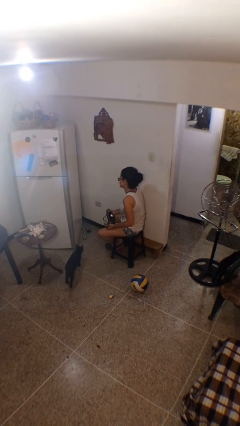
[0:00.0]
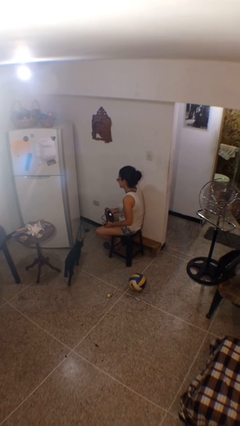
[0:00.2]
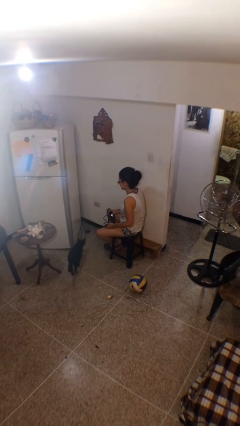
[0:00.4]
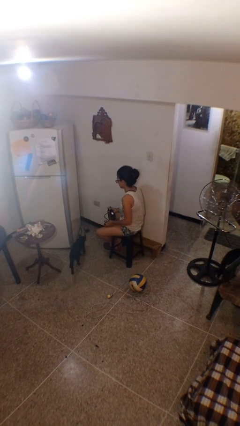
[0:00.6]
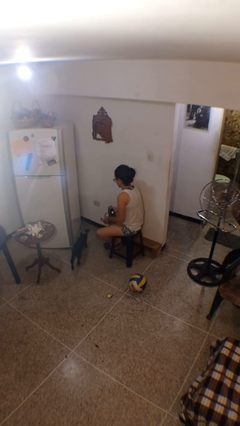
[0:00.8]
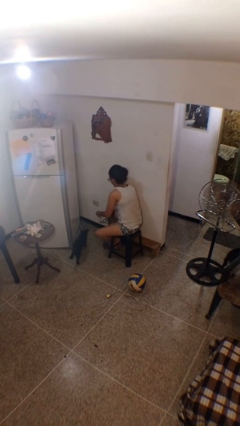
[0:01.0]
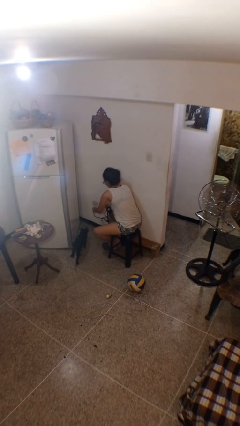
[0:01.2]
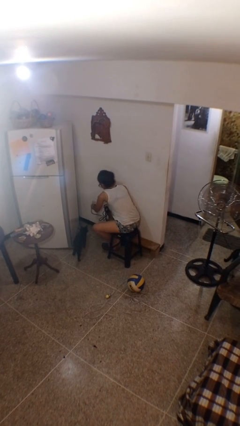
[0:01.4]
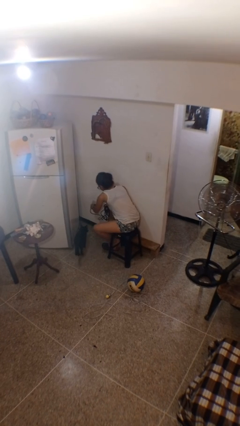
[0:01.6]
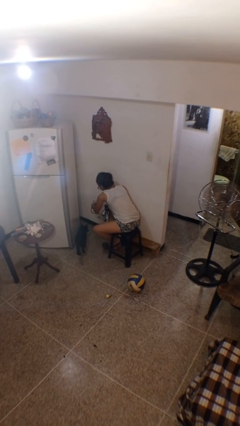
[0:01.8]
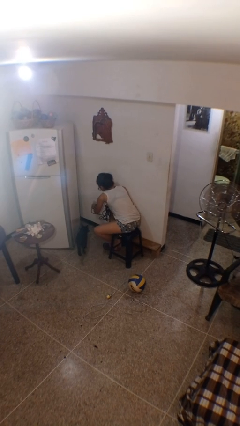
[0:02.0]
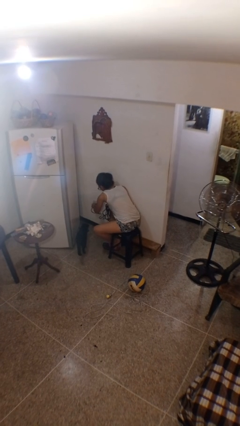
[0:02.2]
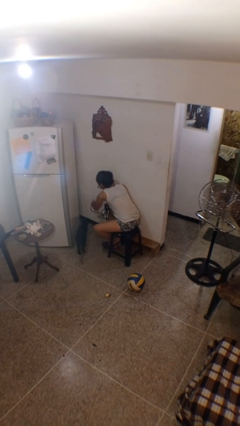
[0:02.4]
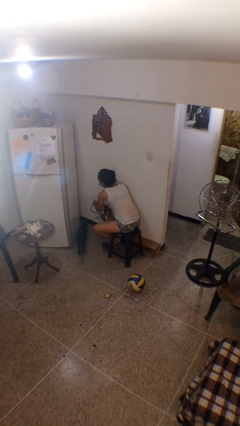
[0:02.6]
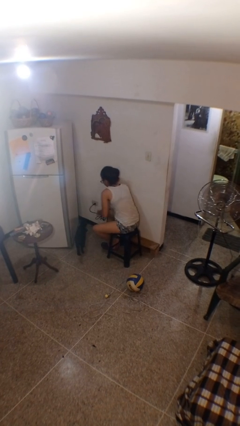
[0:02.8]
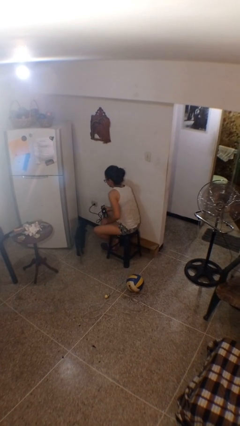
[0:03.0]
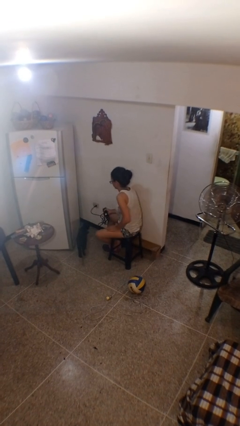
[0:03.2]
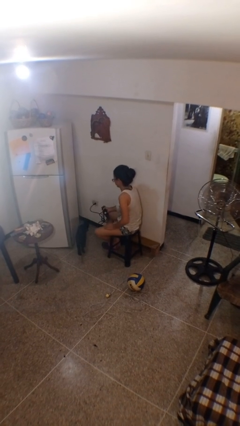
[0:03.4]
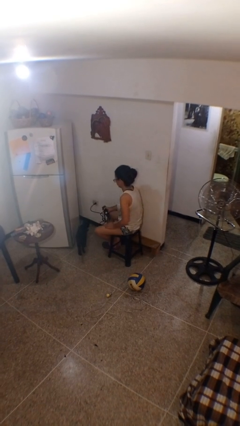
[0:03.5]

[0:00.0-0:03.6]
person plugs into electrical socket

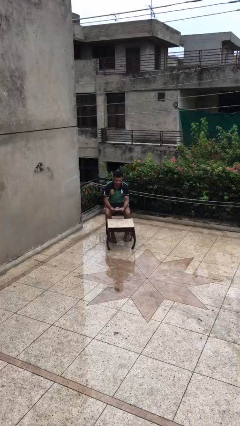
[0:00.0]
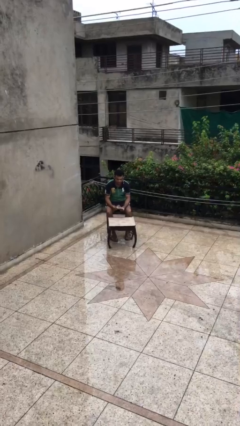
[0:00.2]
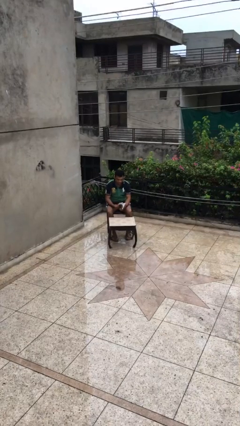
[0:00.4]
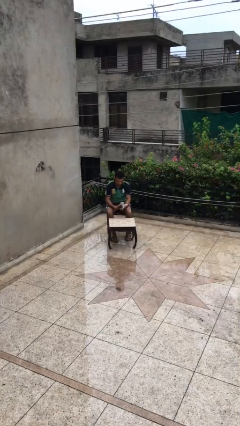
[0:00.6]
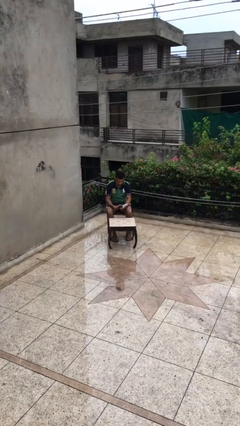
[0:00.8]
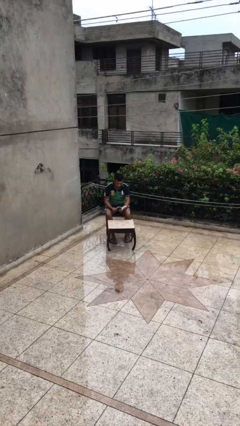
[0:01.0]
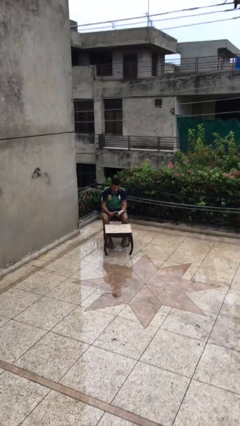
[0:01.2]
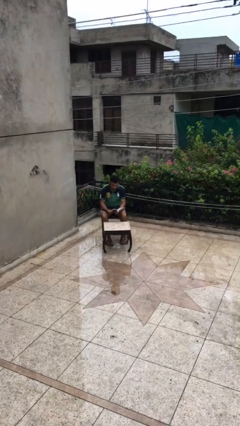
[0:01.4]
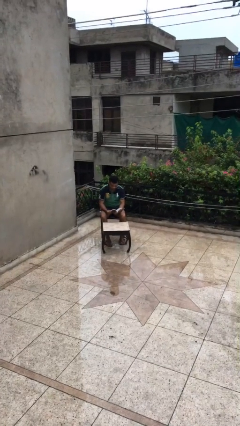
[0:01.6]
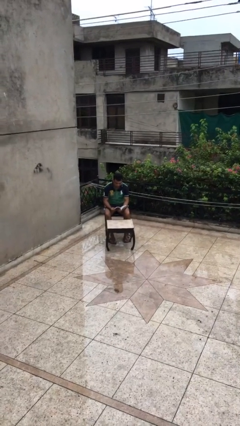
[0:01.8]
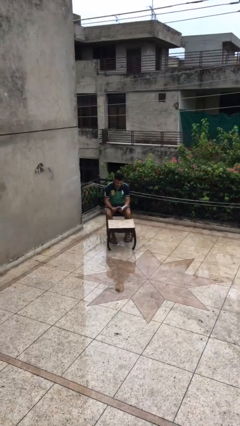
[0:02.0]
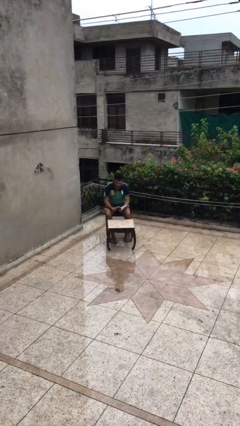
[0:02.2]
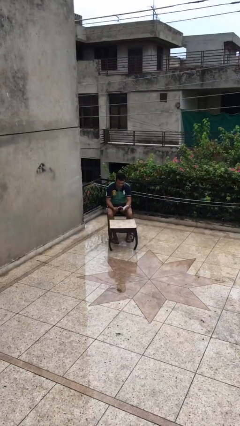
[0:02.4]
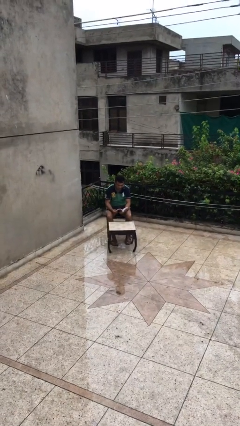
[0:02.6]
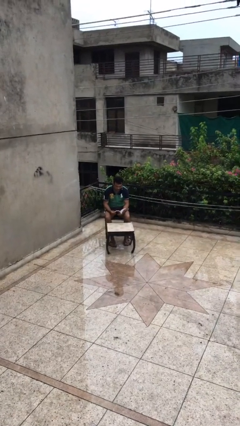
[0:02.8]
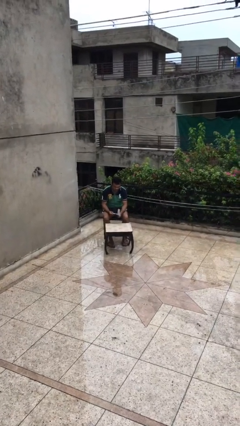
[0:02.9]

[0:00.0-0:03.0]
person reads document

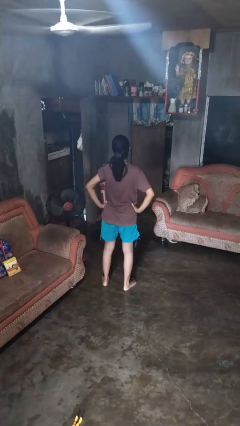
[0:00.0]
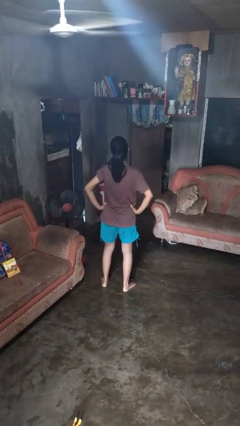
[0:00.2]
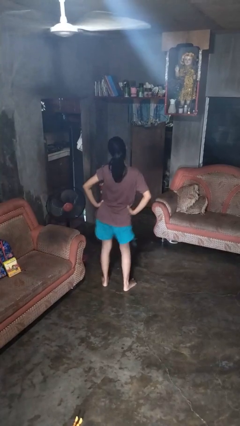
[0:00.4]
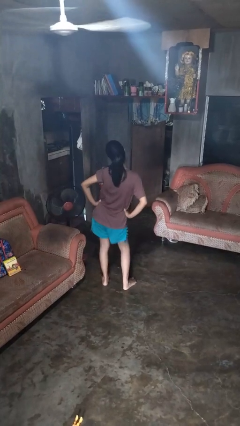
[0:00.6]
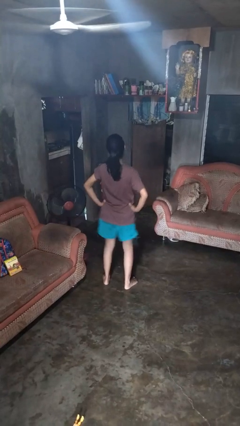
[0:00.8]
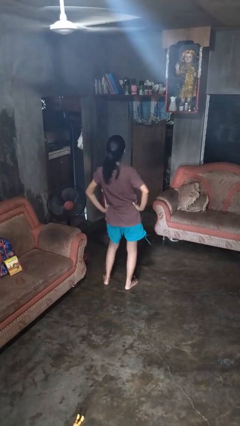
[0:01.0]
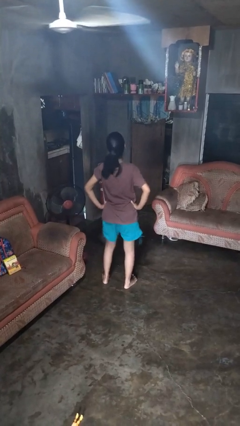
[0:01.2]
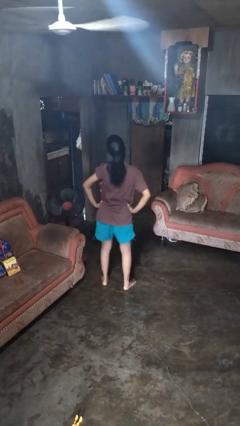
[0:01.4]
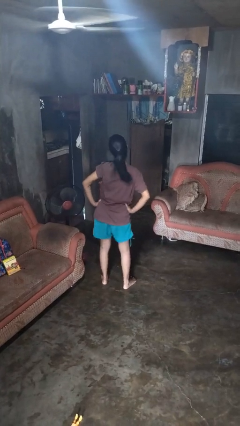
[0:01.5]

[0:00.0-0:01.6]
person dances in place

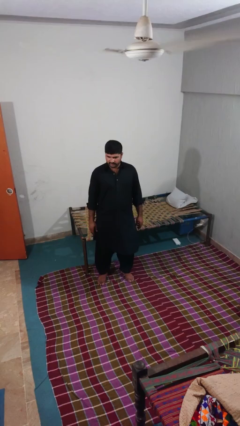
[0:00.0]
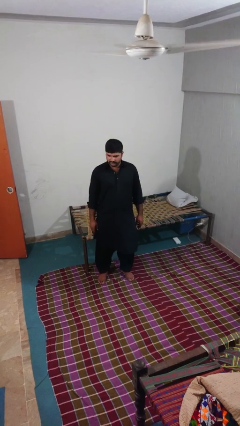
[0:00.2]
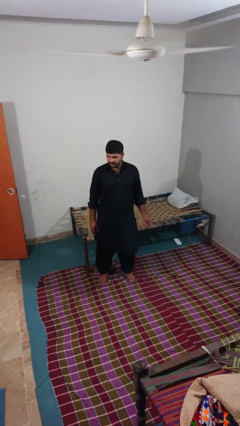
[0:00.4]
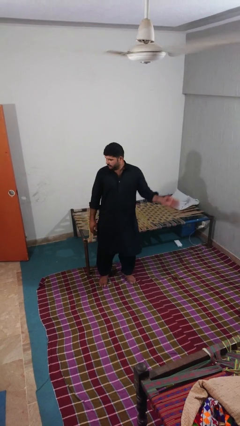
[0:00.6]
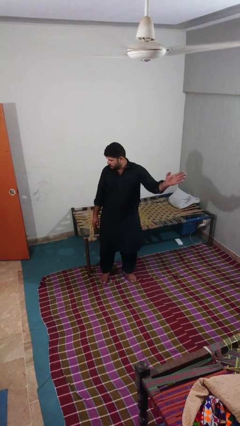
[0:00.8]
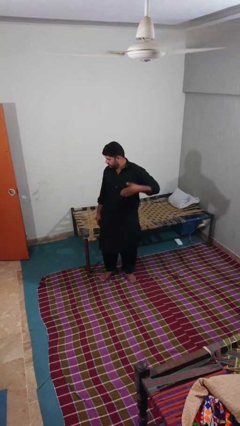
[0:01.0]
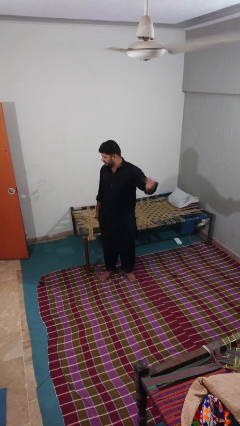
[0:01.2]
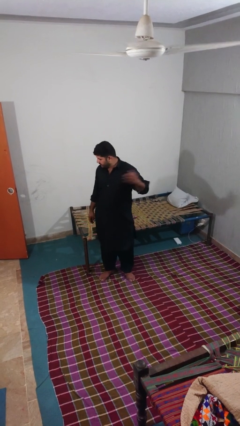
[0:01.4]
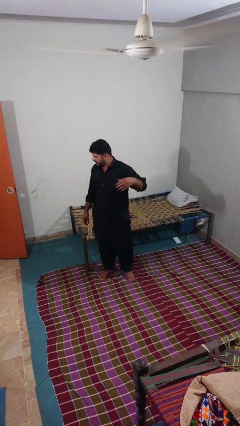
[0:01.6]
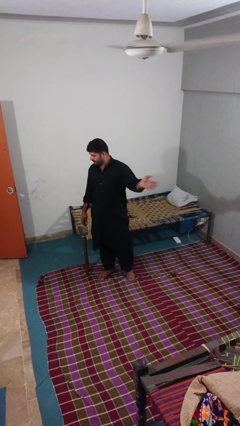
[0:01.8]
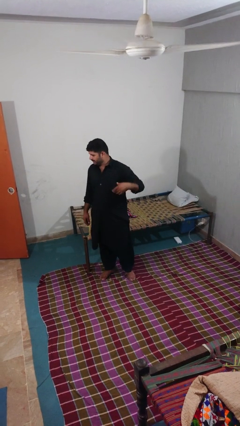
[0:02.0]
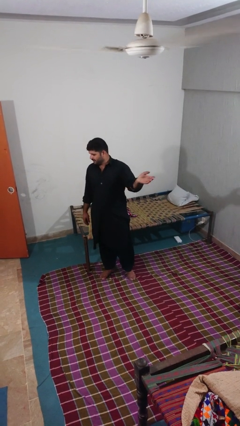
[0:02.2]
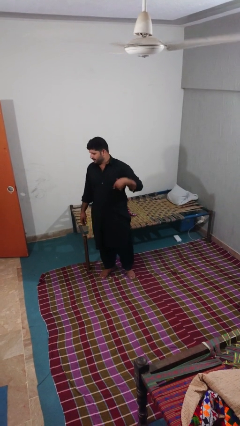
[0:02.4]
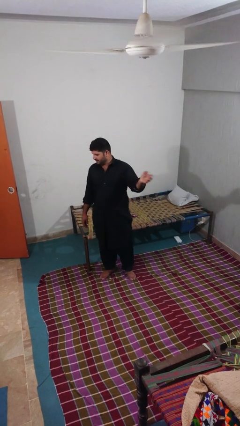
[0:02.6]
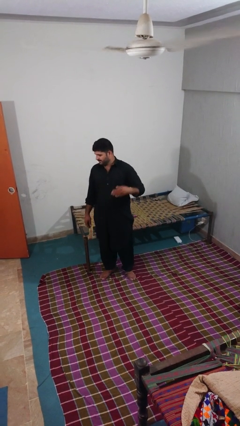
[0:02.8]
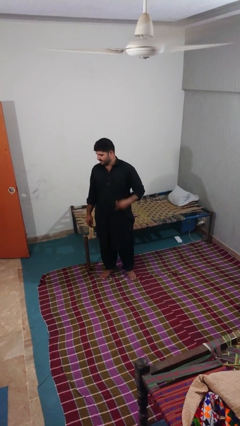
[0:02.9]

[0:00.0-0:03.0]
person gestures come here

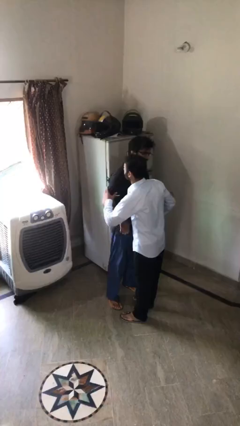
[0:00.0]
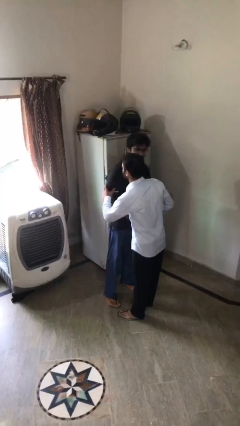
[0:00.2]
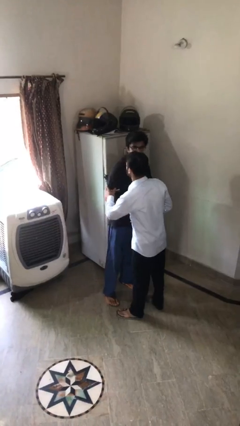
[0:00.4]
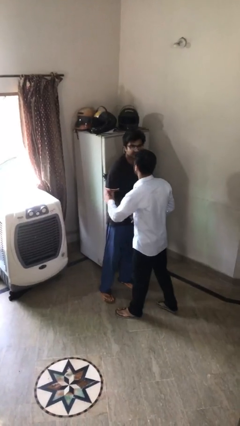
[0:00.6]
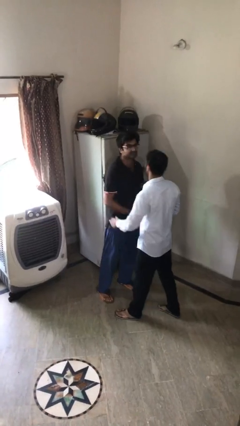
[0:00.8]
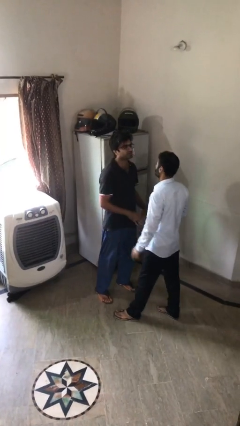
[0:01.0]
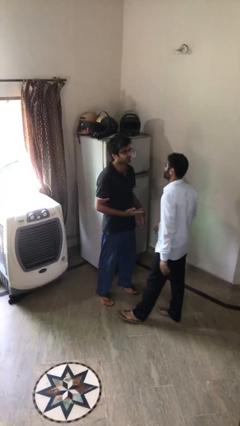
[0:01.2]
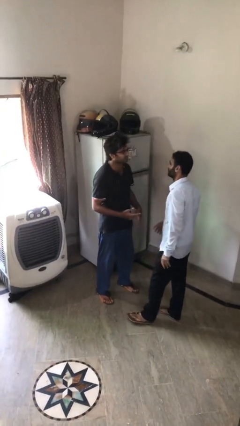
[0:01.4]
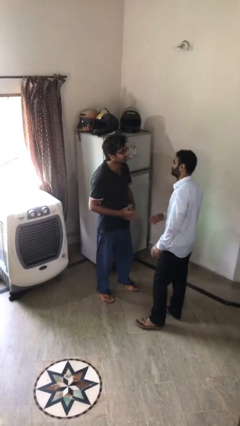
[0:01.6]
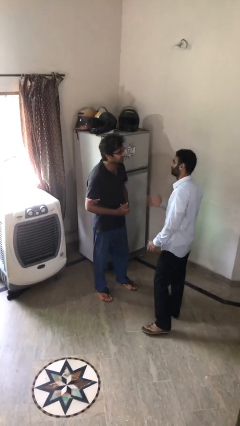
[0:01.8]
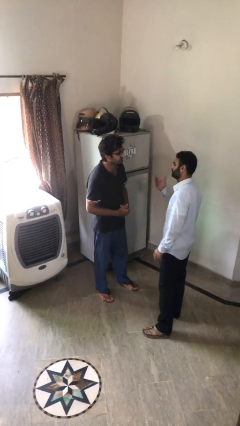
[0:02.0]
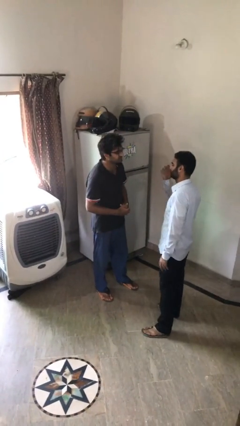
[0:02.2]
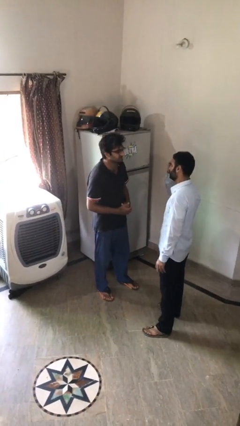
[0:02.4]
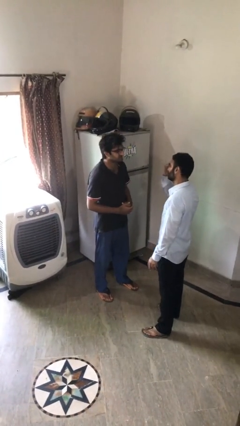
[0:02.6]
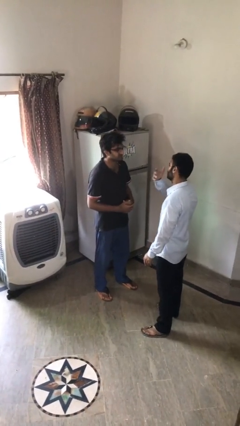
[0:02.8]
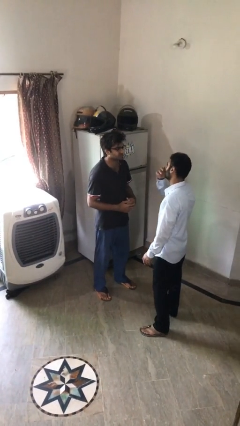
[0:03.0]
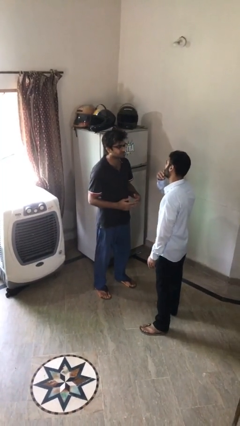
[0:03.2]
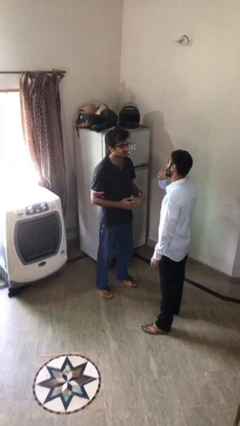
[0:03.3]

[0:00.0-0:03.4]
person talks to person

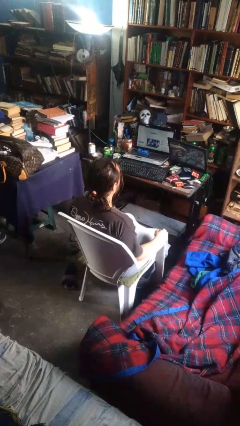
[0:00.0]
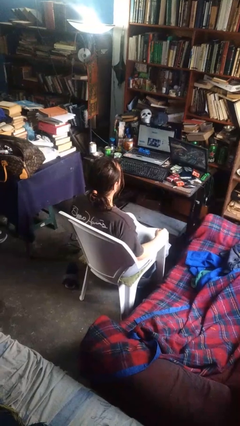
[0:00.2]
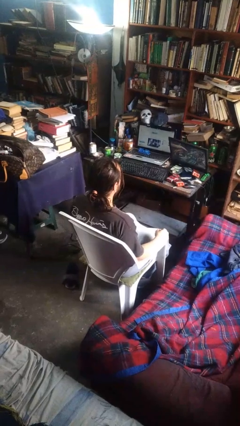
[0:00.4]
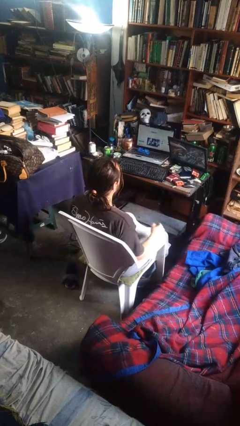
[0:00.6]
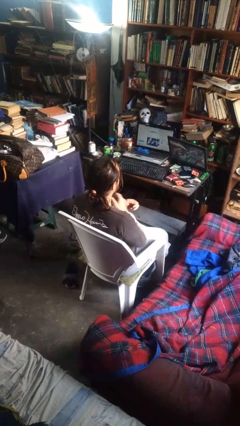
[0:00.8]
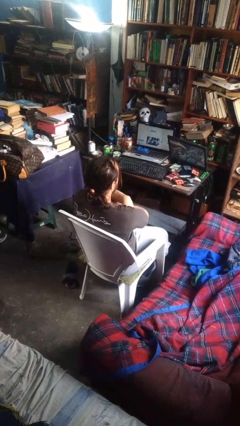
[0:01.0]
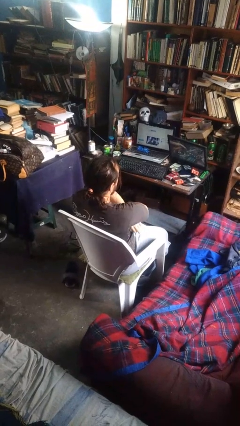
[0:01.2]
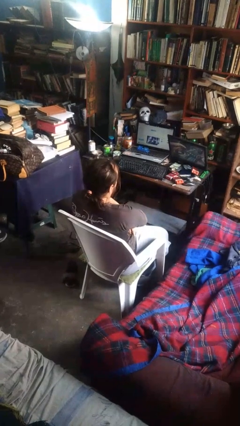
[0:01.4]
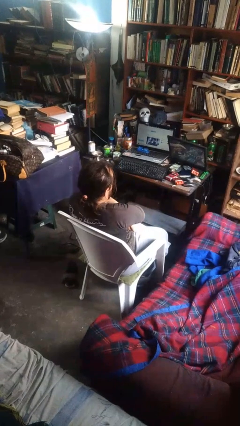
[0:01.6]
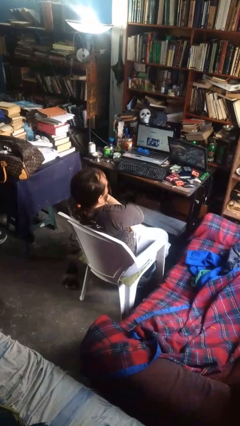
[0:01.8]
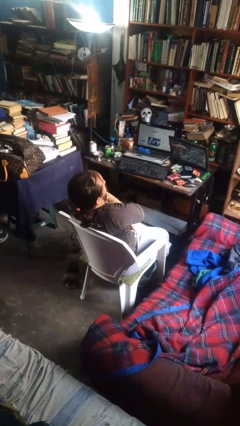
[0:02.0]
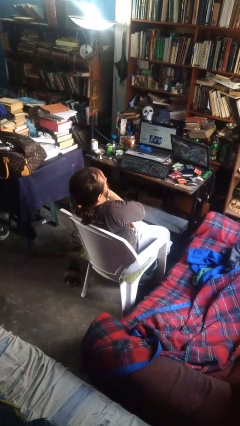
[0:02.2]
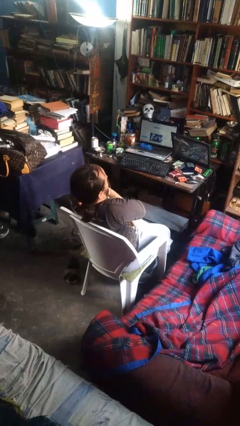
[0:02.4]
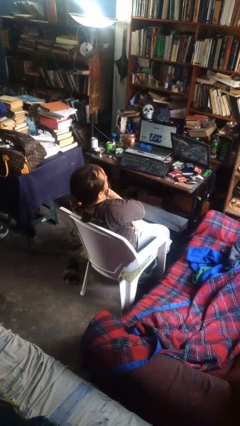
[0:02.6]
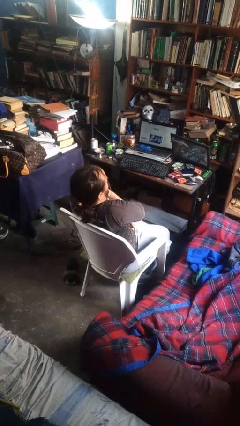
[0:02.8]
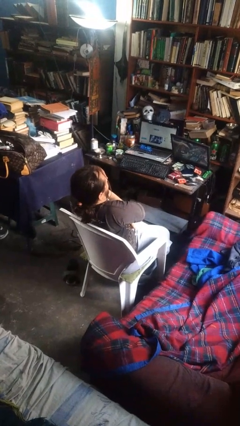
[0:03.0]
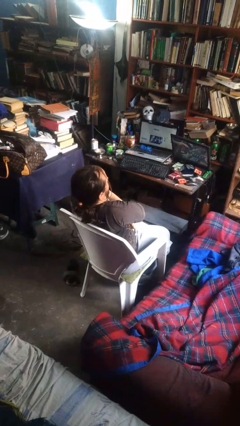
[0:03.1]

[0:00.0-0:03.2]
person crosses arms
